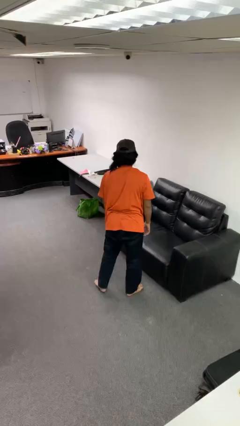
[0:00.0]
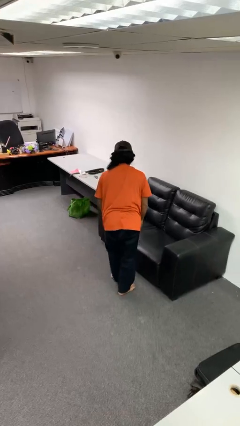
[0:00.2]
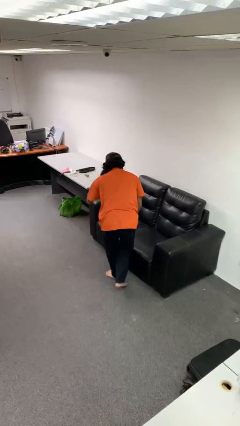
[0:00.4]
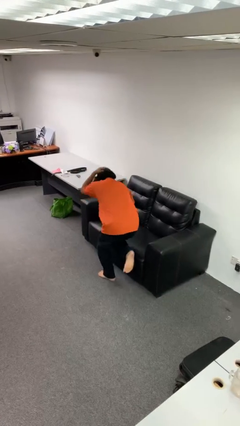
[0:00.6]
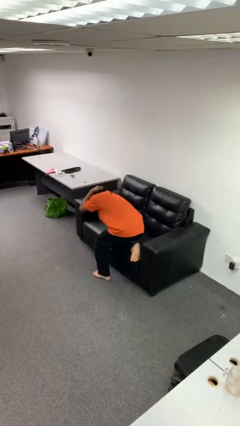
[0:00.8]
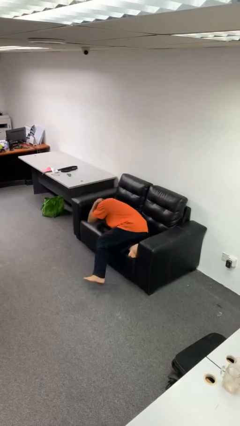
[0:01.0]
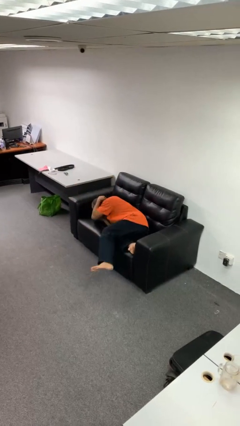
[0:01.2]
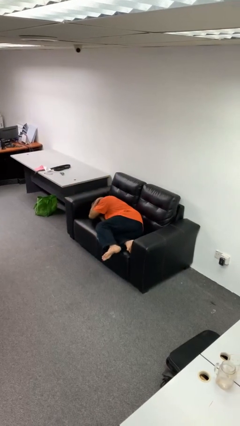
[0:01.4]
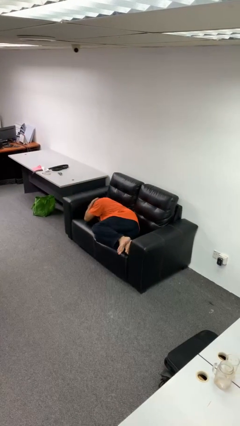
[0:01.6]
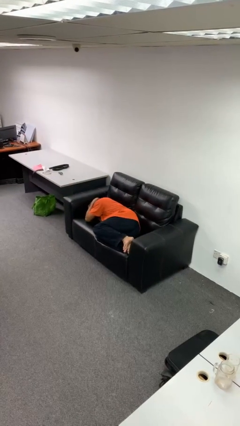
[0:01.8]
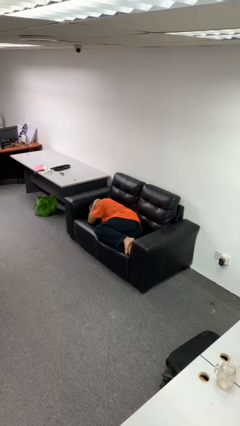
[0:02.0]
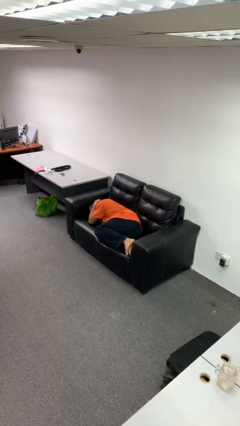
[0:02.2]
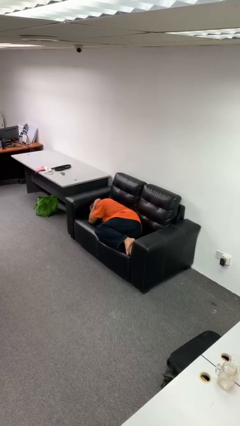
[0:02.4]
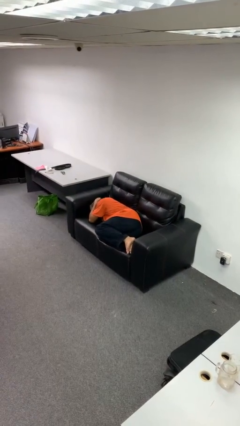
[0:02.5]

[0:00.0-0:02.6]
person lies down on couch

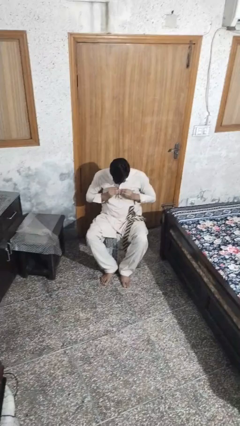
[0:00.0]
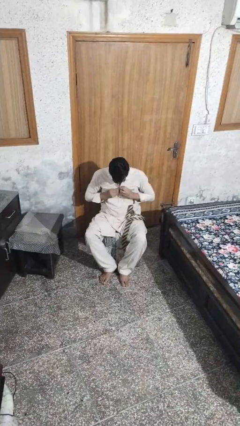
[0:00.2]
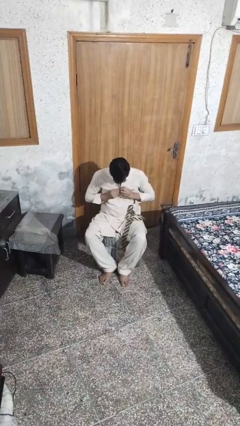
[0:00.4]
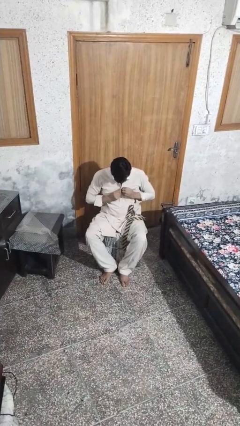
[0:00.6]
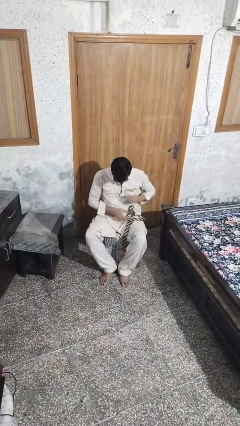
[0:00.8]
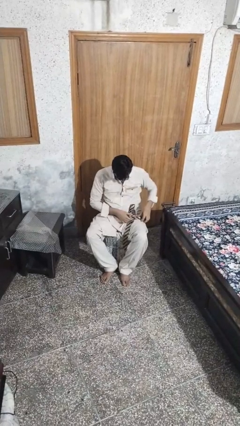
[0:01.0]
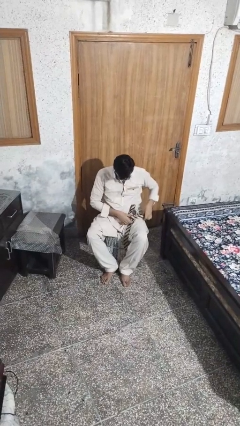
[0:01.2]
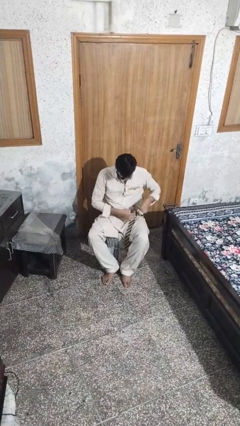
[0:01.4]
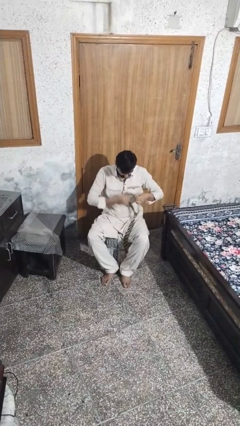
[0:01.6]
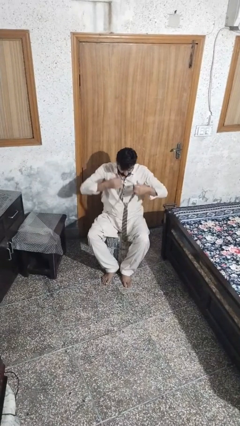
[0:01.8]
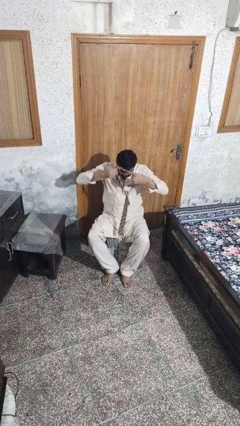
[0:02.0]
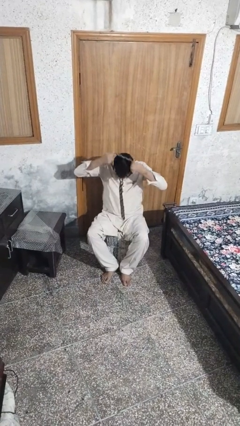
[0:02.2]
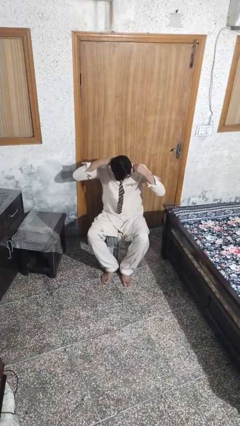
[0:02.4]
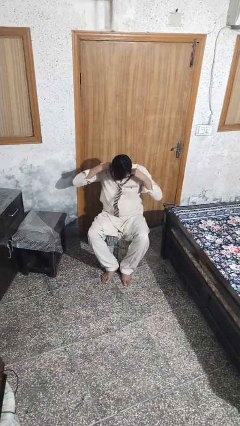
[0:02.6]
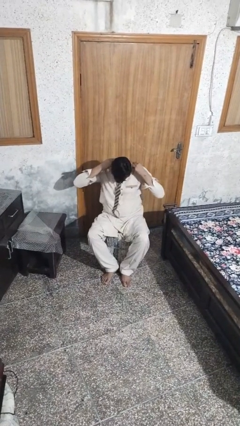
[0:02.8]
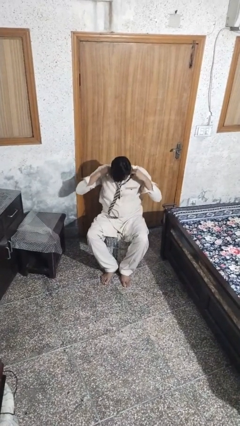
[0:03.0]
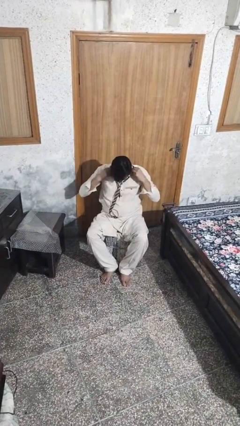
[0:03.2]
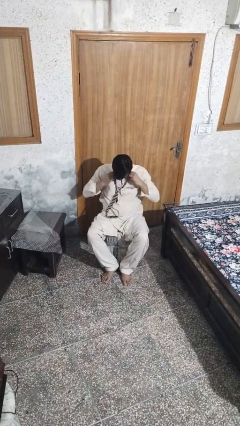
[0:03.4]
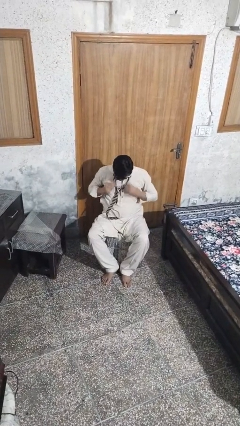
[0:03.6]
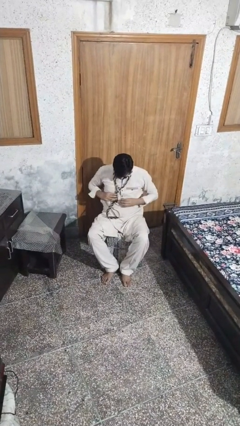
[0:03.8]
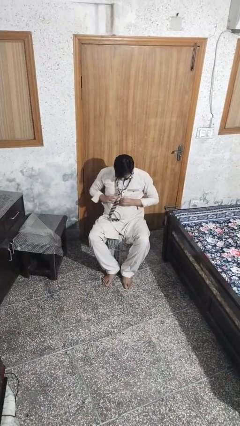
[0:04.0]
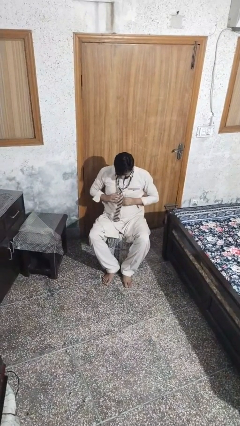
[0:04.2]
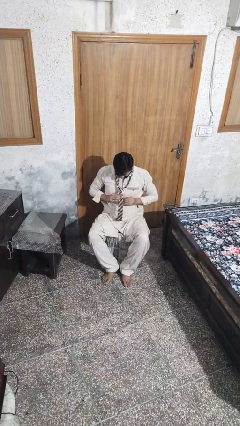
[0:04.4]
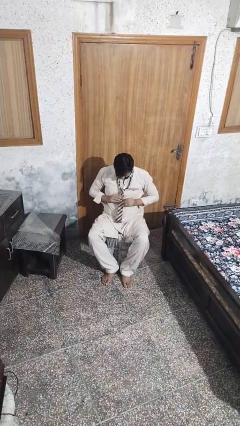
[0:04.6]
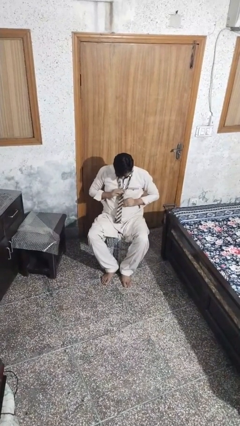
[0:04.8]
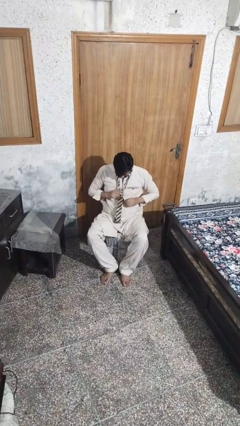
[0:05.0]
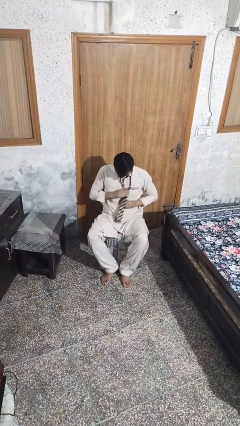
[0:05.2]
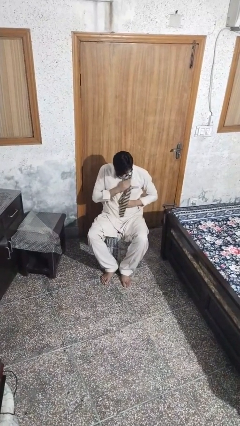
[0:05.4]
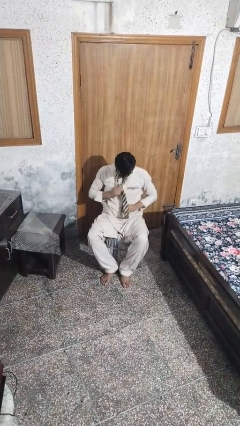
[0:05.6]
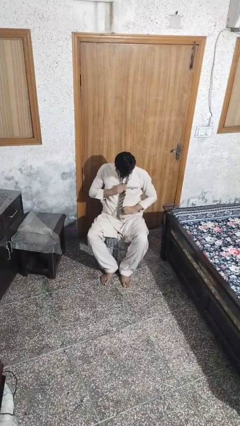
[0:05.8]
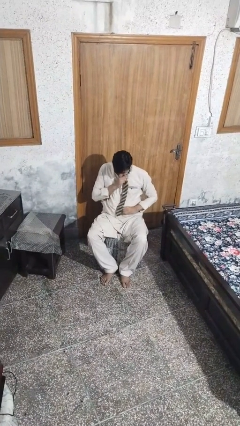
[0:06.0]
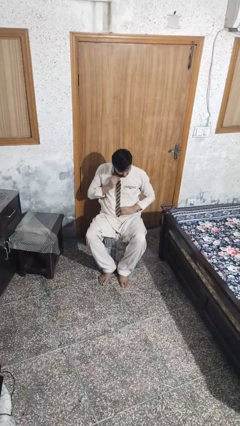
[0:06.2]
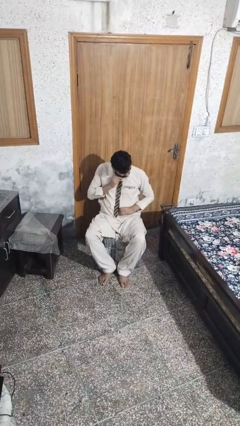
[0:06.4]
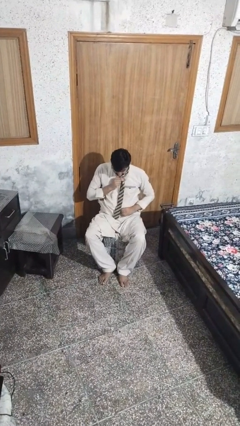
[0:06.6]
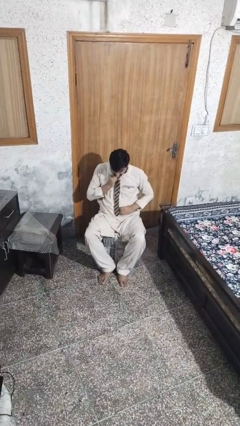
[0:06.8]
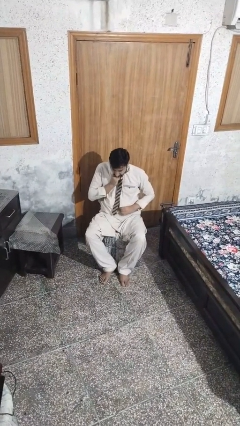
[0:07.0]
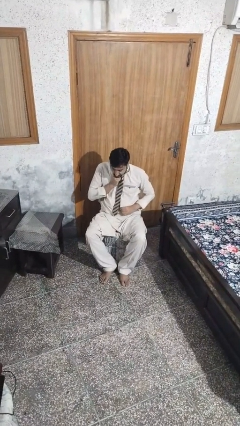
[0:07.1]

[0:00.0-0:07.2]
person puts on necktie

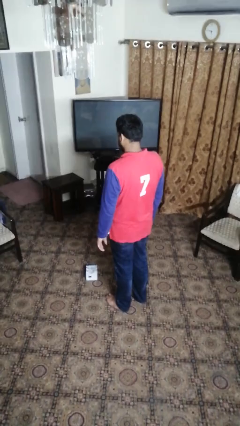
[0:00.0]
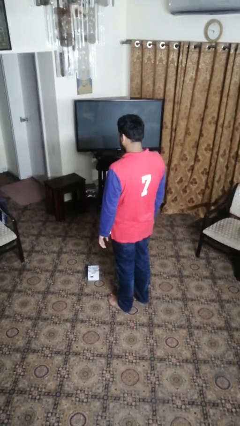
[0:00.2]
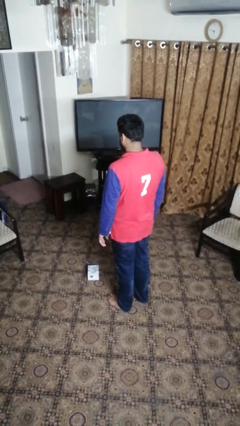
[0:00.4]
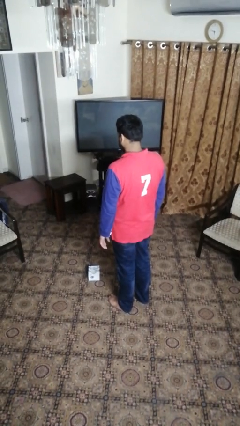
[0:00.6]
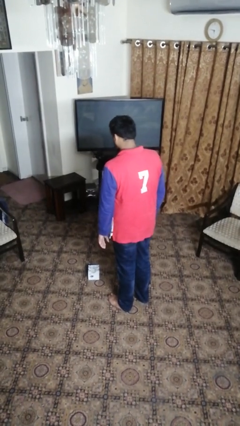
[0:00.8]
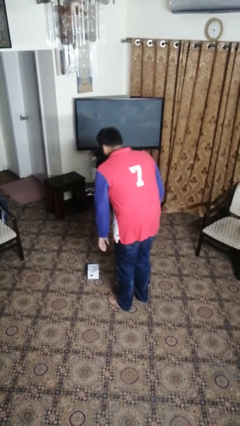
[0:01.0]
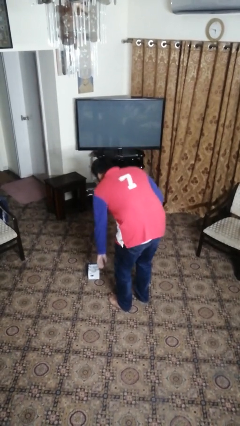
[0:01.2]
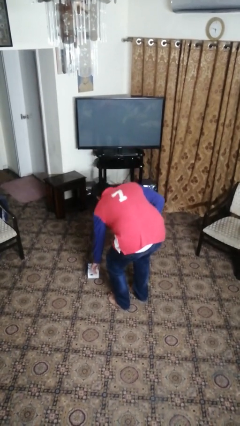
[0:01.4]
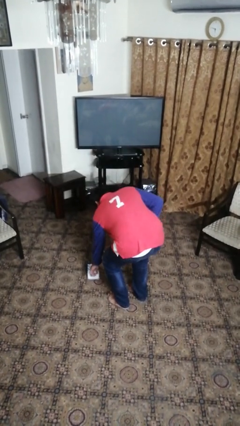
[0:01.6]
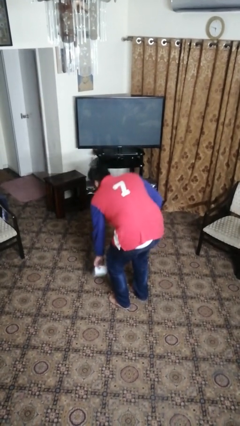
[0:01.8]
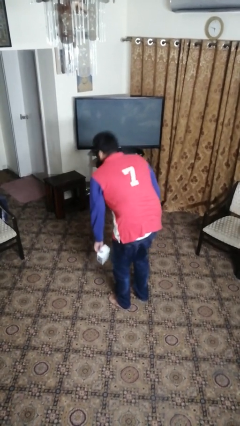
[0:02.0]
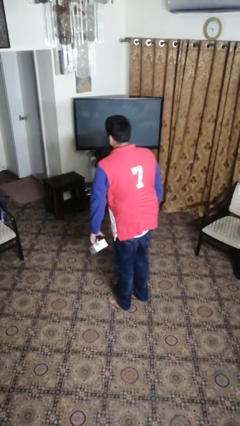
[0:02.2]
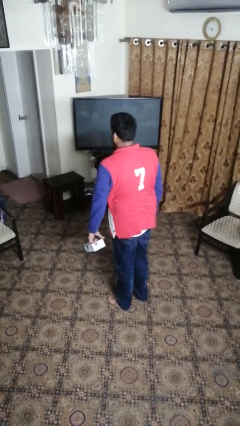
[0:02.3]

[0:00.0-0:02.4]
person picks up object from floor

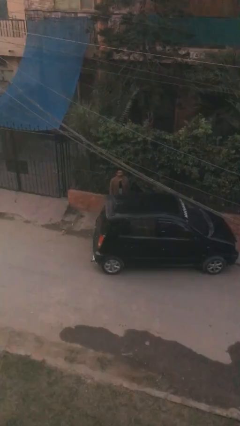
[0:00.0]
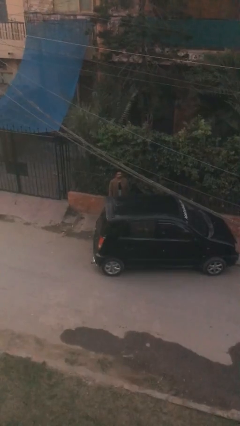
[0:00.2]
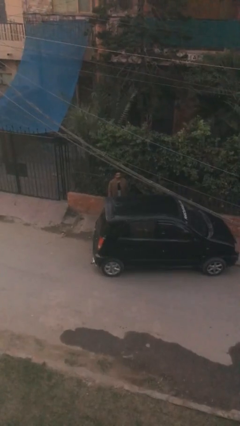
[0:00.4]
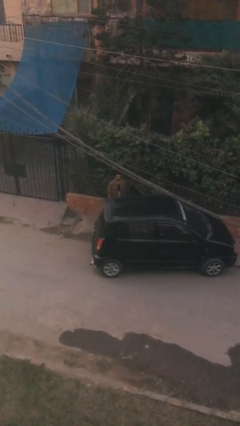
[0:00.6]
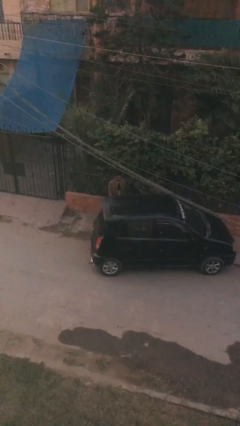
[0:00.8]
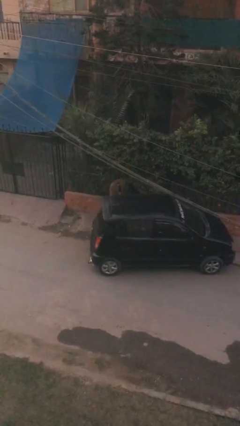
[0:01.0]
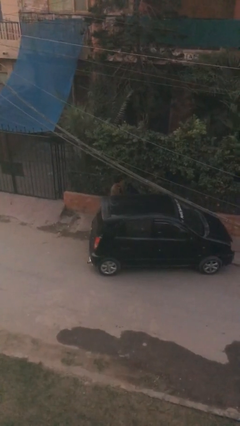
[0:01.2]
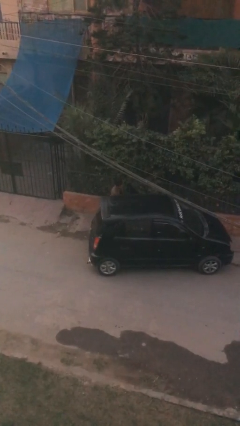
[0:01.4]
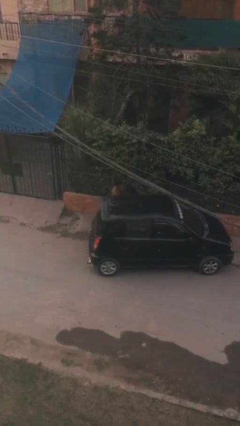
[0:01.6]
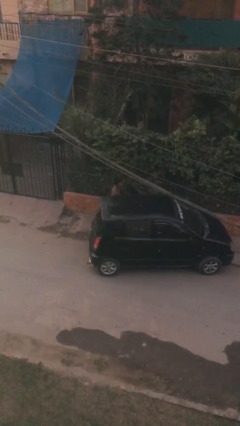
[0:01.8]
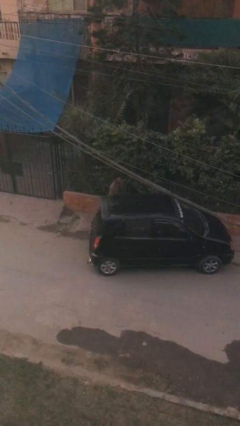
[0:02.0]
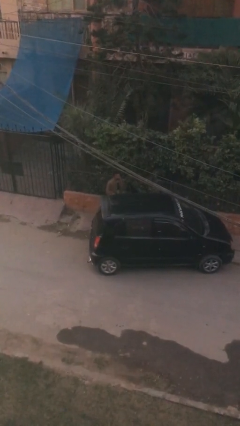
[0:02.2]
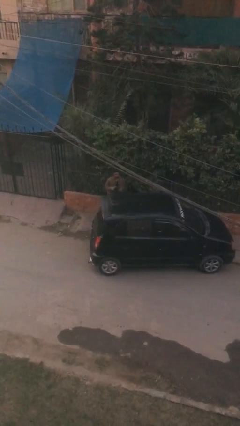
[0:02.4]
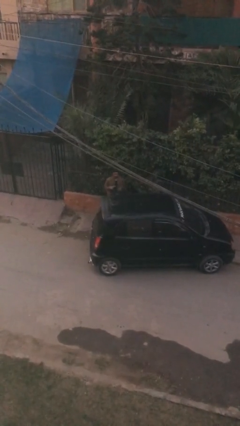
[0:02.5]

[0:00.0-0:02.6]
person unloads car

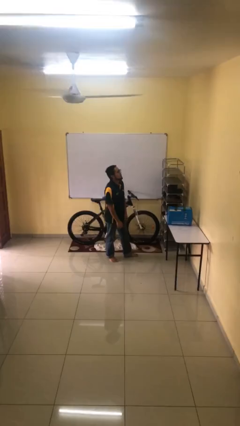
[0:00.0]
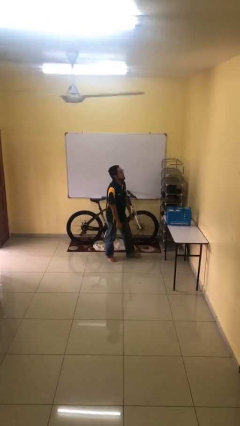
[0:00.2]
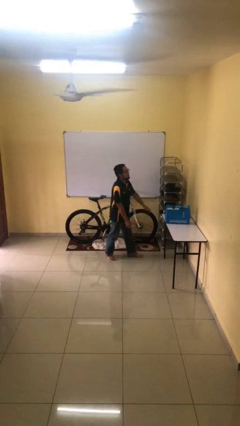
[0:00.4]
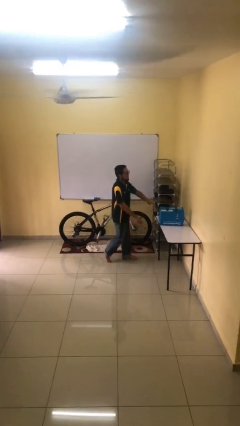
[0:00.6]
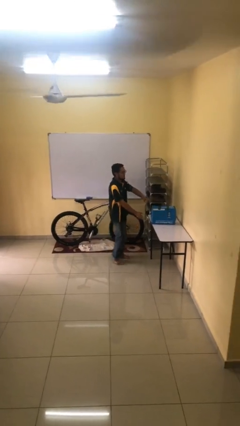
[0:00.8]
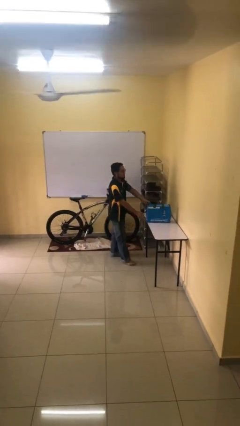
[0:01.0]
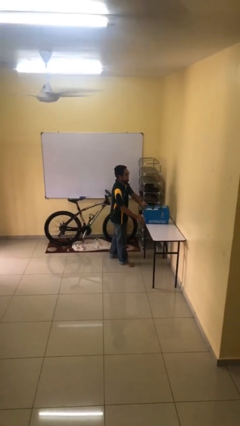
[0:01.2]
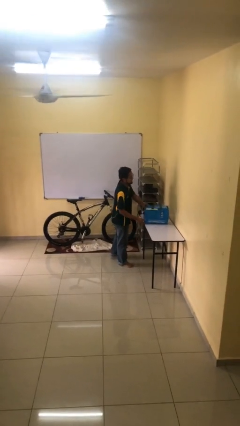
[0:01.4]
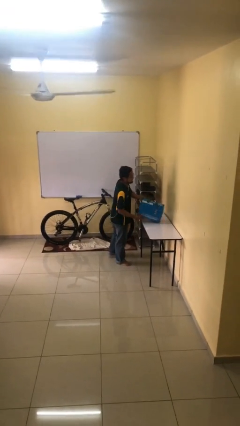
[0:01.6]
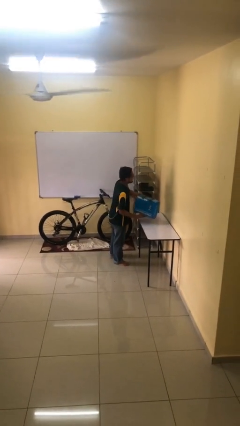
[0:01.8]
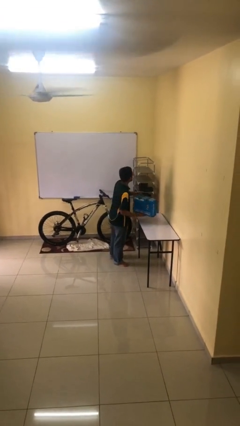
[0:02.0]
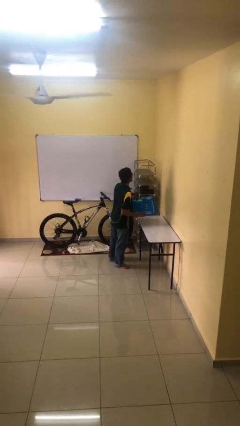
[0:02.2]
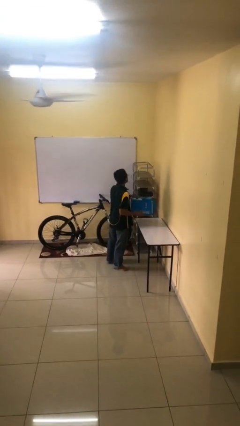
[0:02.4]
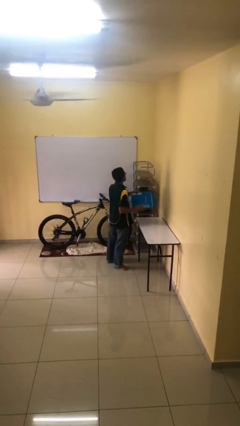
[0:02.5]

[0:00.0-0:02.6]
person picks up object from table

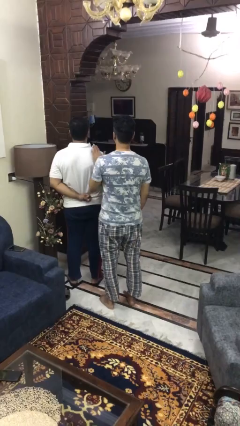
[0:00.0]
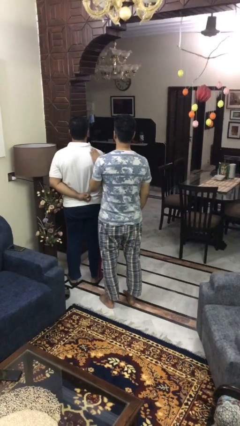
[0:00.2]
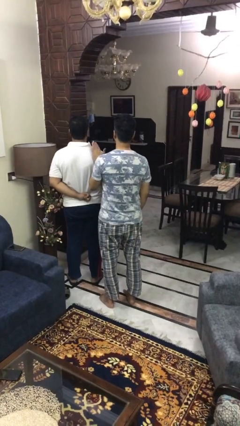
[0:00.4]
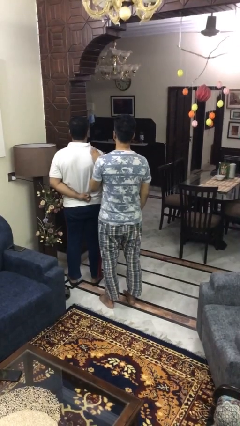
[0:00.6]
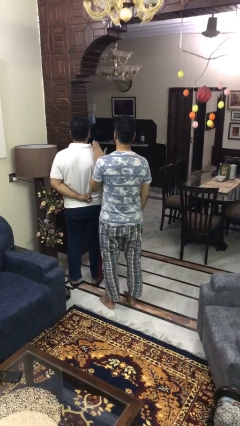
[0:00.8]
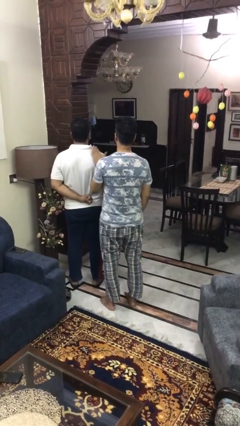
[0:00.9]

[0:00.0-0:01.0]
person touches back of person
